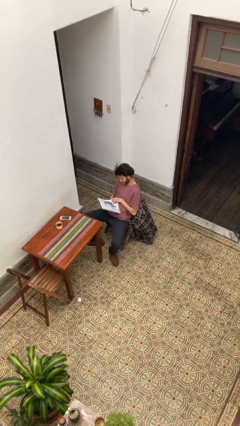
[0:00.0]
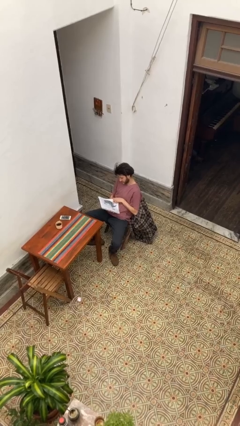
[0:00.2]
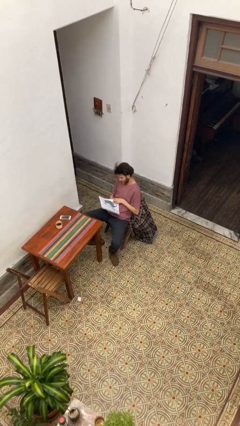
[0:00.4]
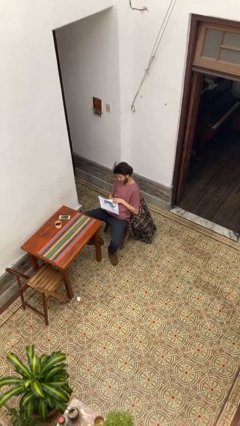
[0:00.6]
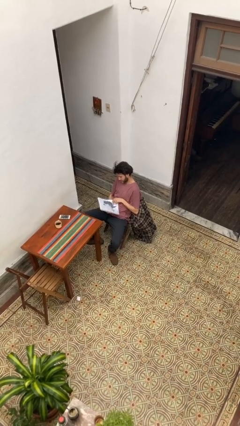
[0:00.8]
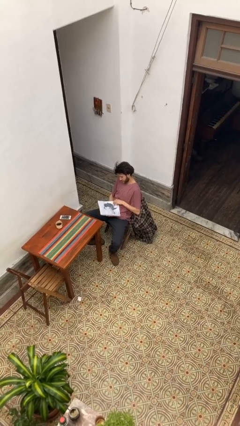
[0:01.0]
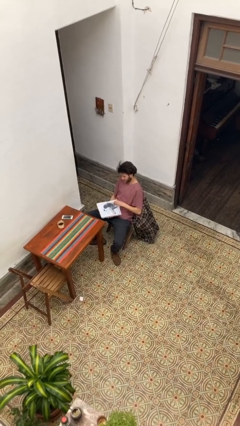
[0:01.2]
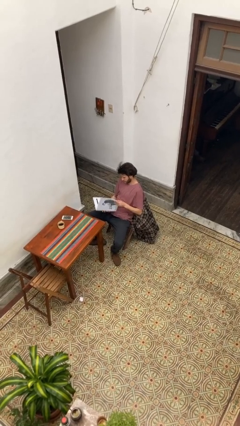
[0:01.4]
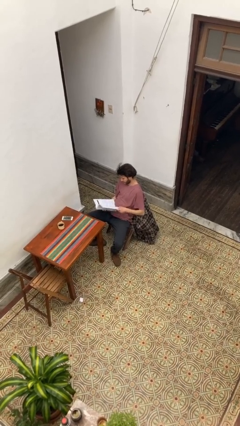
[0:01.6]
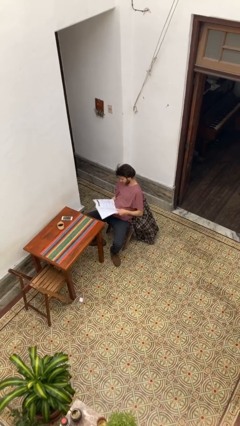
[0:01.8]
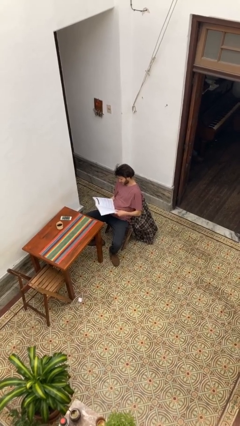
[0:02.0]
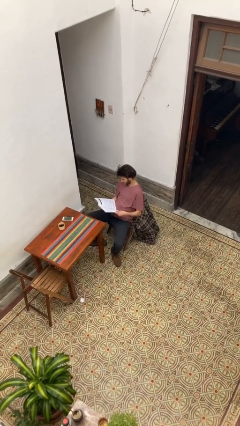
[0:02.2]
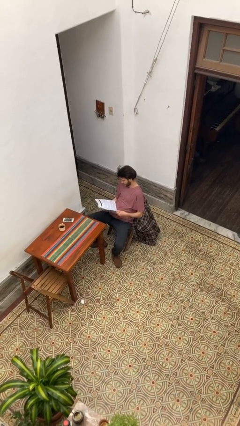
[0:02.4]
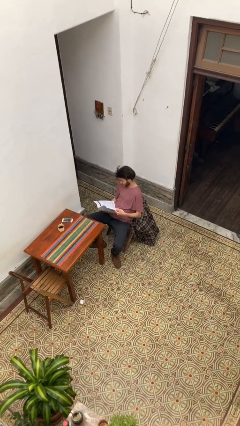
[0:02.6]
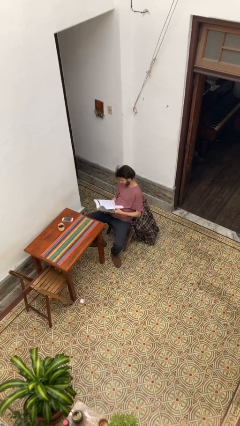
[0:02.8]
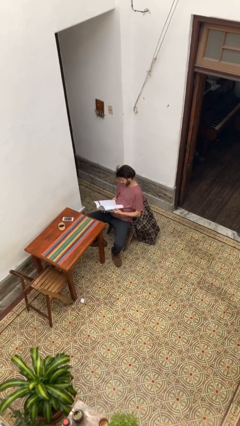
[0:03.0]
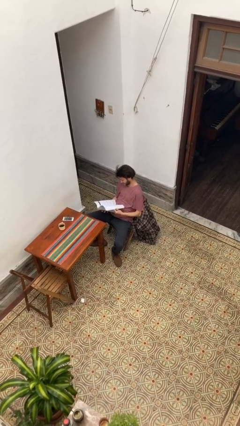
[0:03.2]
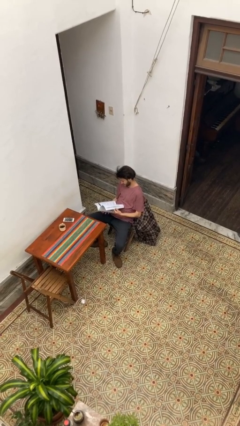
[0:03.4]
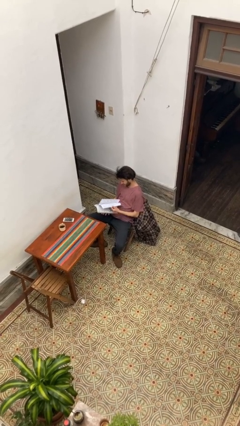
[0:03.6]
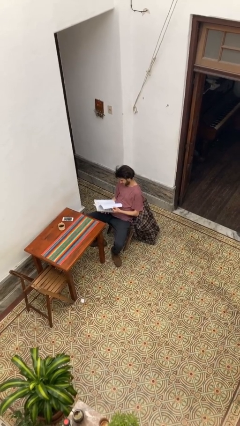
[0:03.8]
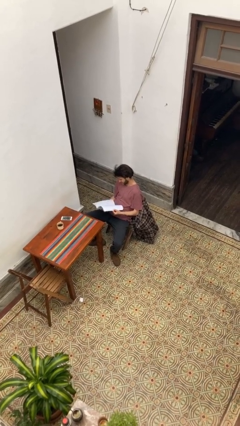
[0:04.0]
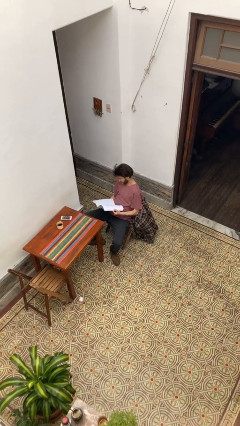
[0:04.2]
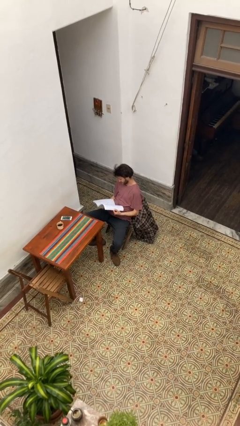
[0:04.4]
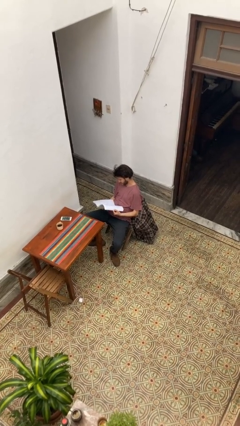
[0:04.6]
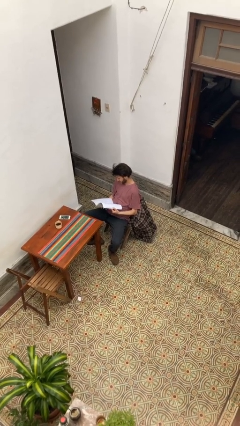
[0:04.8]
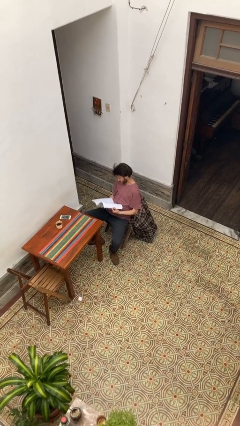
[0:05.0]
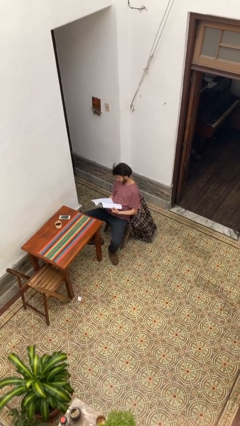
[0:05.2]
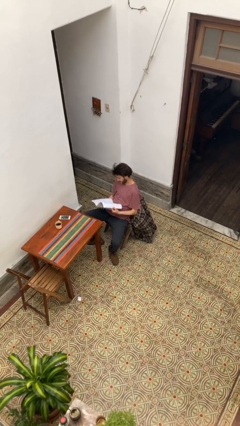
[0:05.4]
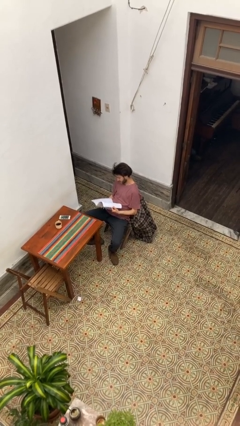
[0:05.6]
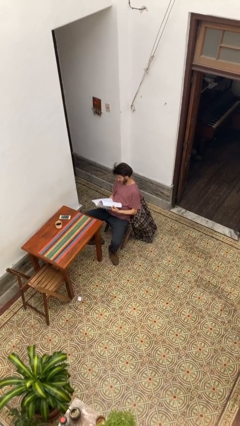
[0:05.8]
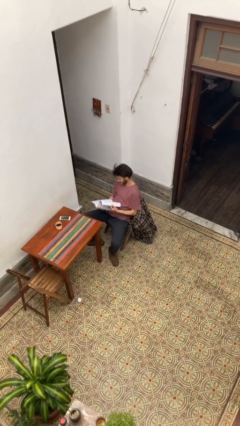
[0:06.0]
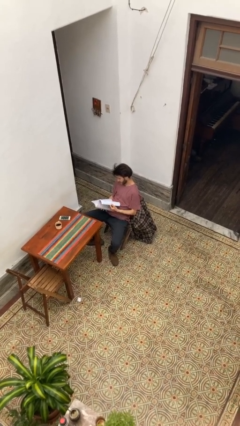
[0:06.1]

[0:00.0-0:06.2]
person reads document

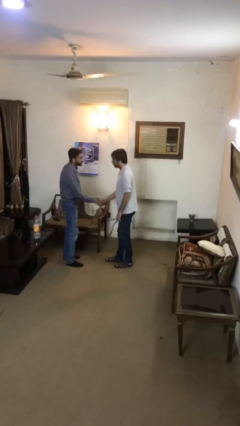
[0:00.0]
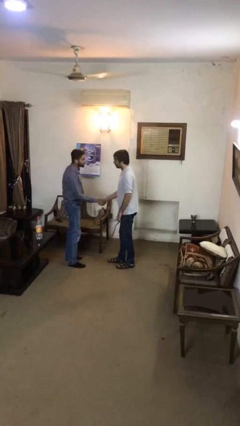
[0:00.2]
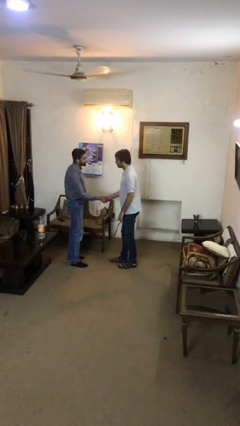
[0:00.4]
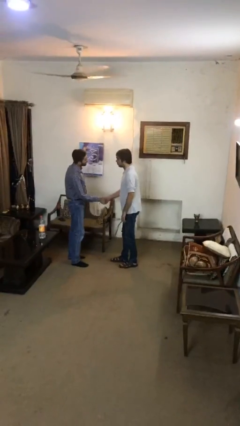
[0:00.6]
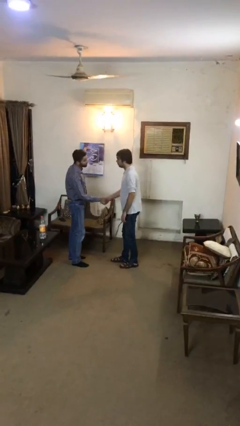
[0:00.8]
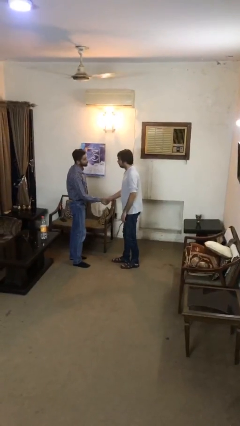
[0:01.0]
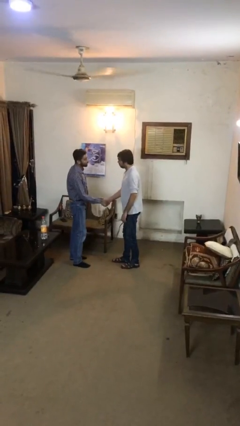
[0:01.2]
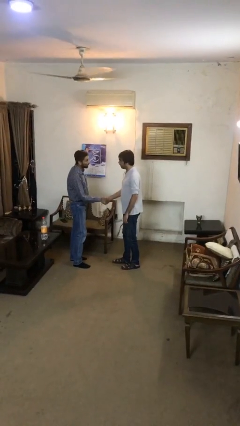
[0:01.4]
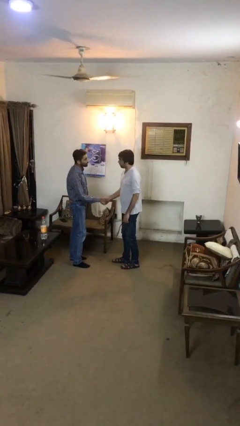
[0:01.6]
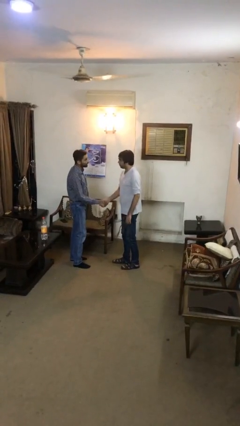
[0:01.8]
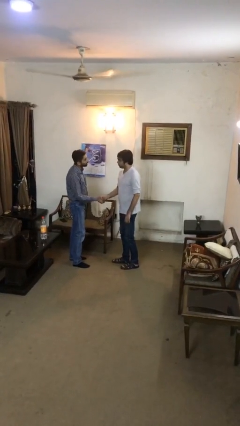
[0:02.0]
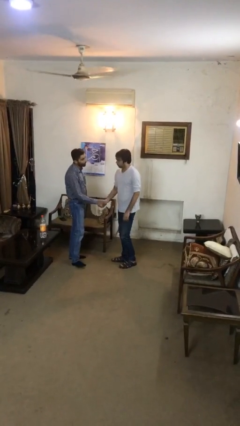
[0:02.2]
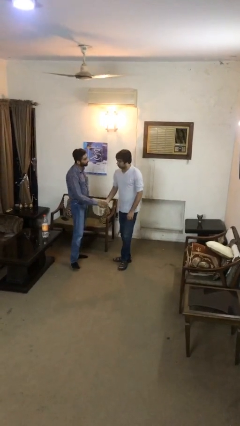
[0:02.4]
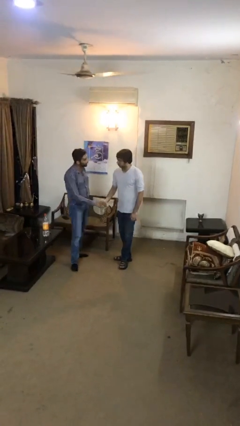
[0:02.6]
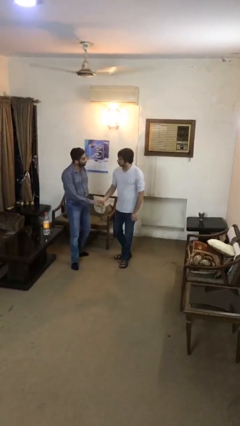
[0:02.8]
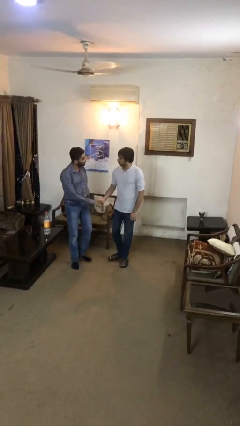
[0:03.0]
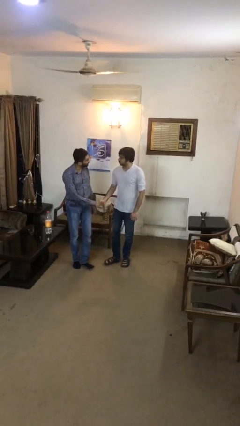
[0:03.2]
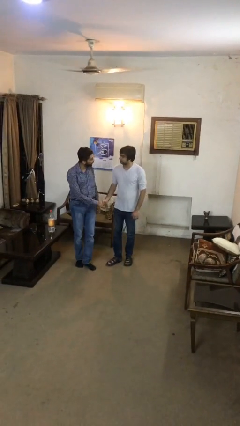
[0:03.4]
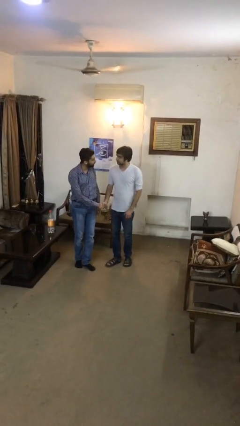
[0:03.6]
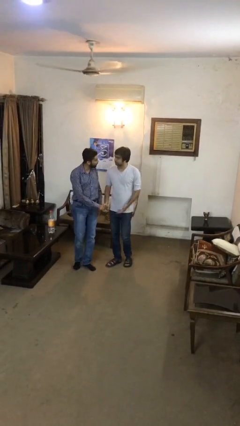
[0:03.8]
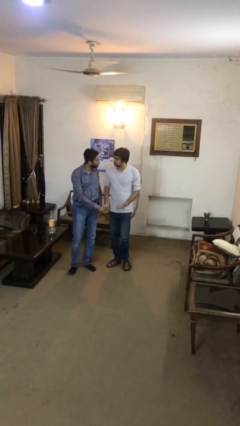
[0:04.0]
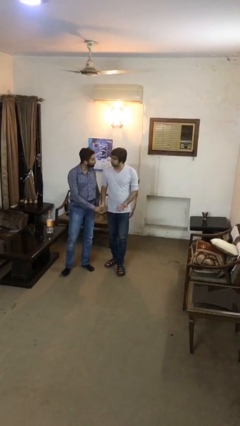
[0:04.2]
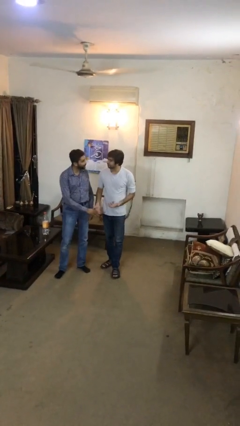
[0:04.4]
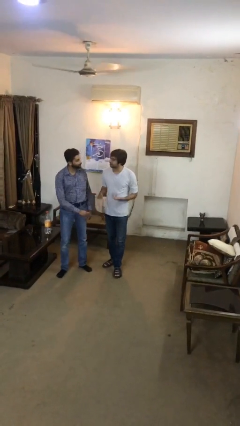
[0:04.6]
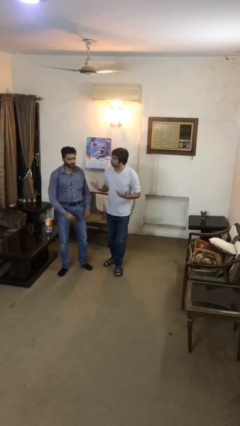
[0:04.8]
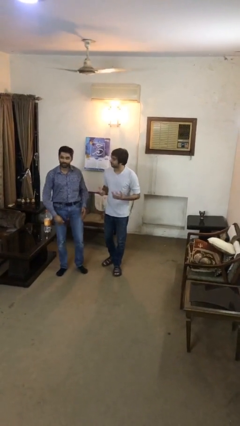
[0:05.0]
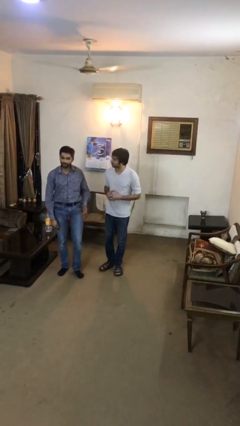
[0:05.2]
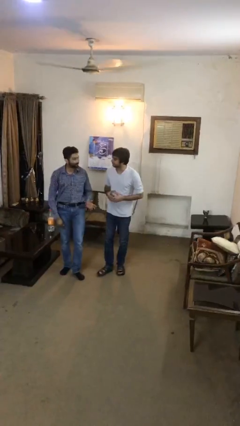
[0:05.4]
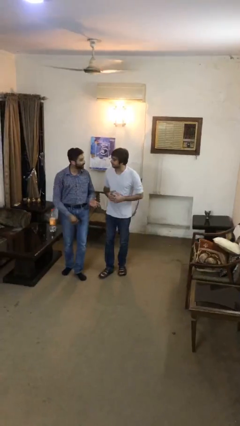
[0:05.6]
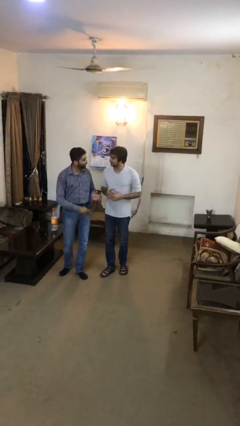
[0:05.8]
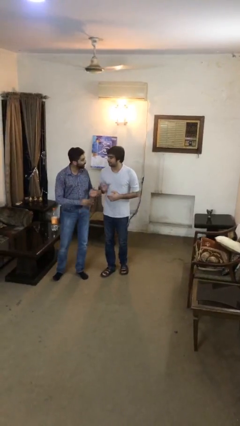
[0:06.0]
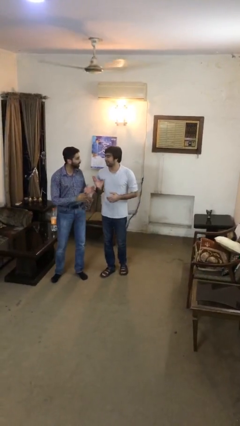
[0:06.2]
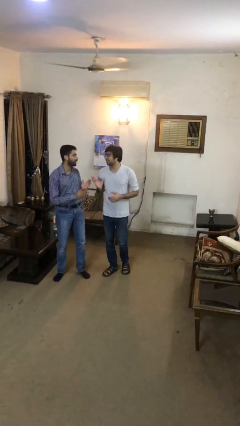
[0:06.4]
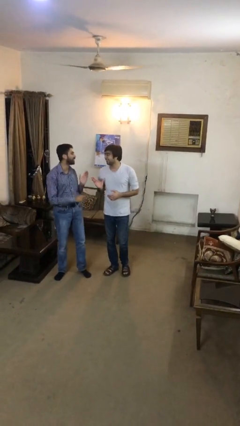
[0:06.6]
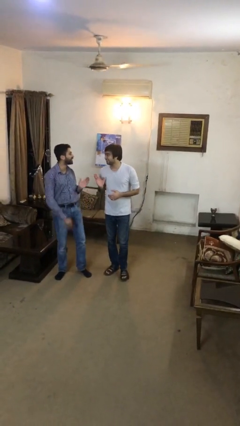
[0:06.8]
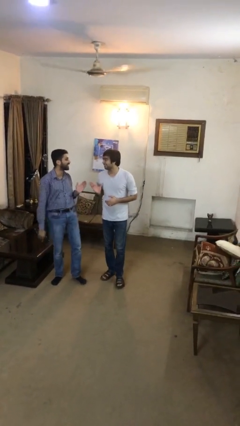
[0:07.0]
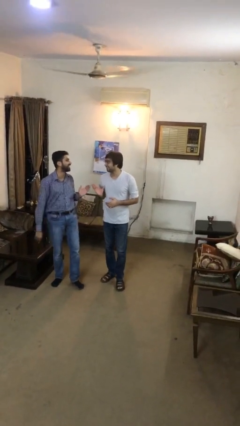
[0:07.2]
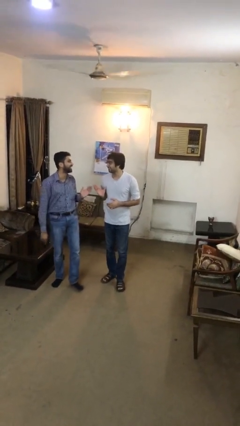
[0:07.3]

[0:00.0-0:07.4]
person talks to person

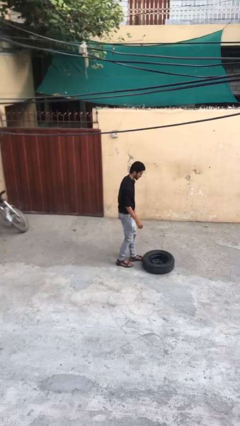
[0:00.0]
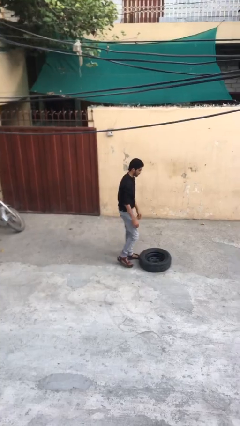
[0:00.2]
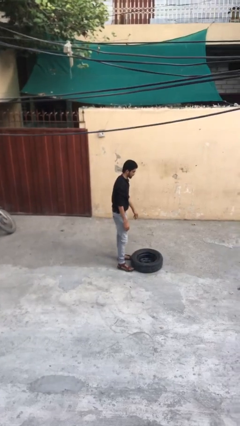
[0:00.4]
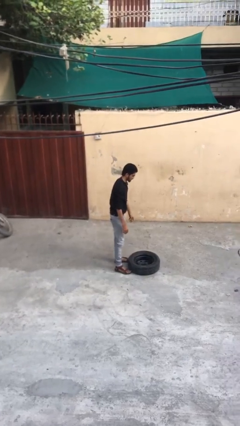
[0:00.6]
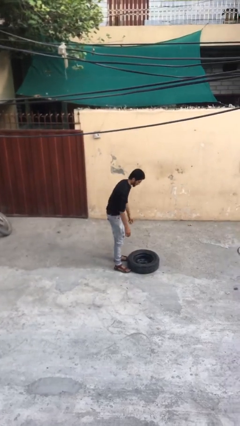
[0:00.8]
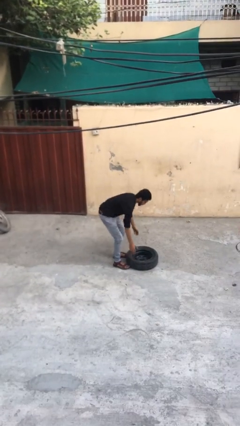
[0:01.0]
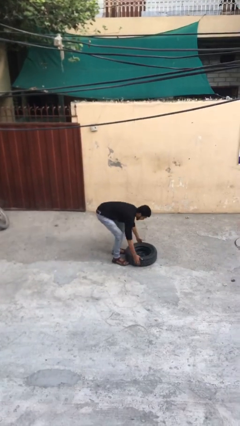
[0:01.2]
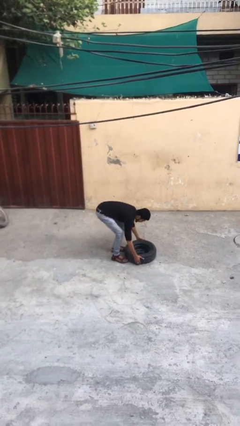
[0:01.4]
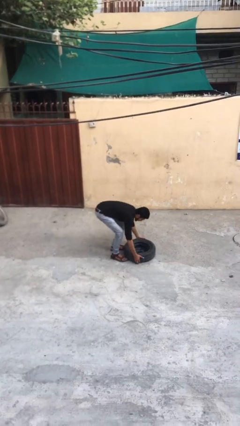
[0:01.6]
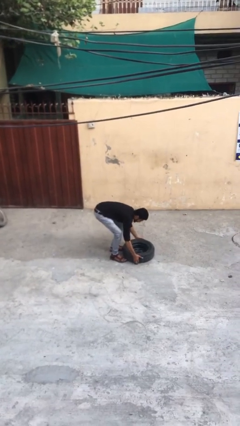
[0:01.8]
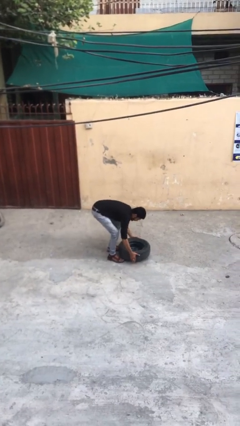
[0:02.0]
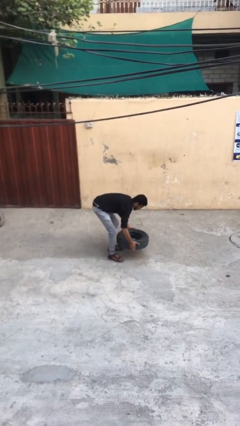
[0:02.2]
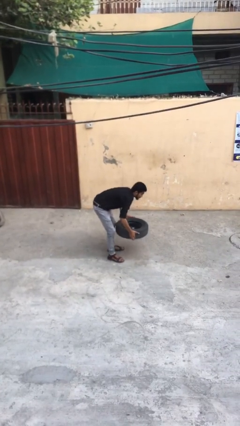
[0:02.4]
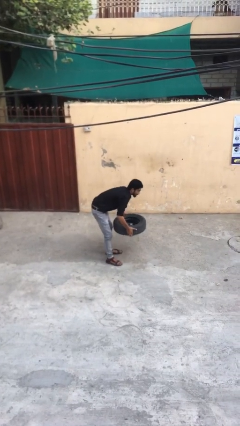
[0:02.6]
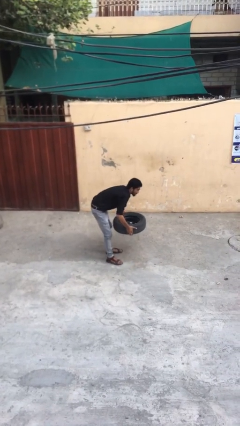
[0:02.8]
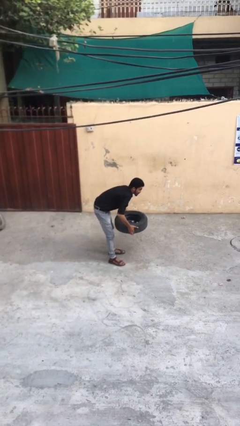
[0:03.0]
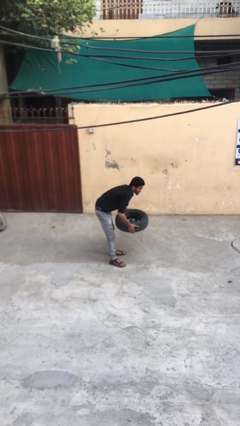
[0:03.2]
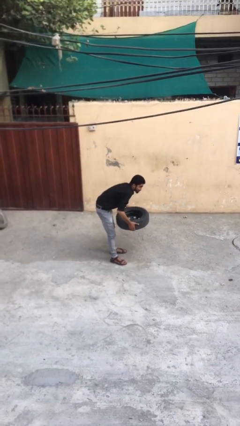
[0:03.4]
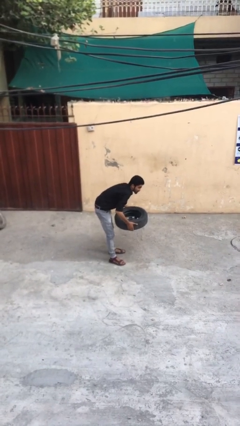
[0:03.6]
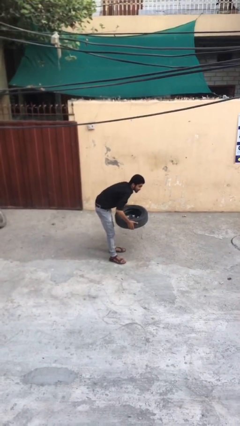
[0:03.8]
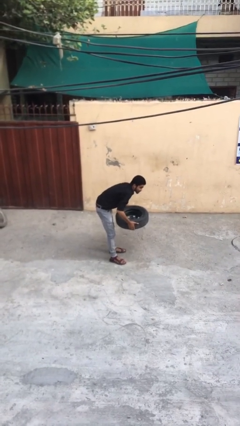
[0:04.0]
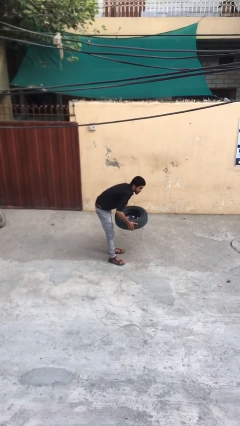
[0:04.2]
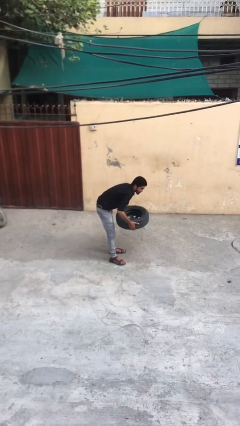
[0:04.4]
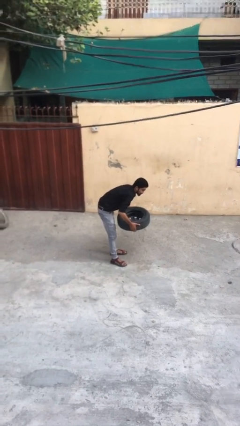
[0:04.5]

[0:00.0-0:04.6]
person picks up object from floor
